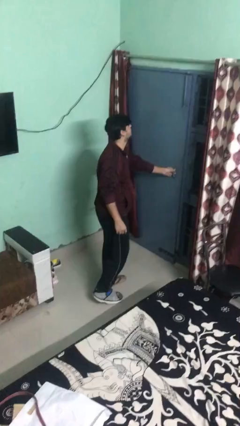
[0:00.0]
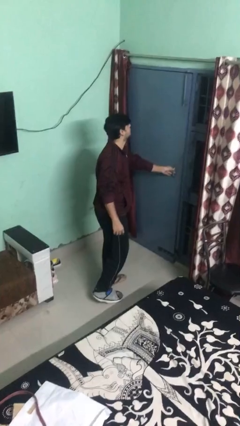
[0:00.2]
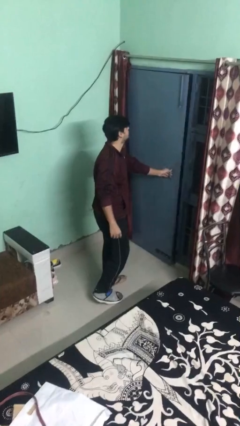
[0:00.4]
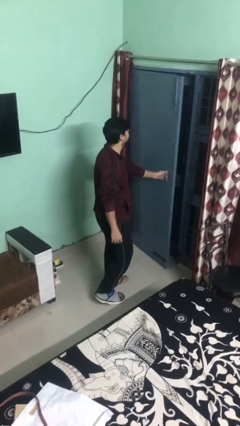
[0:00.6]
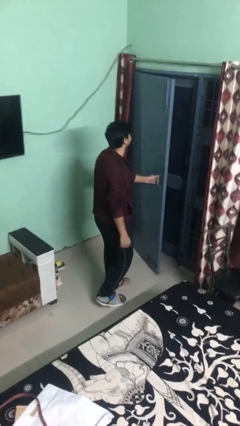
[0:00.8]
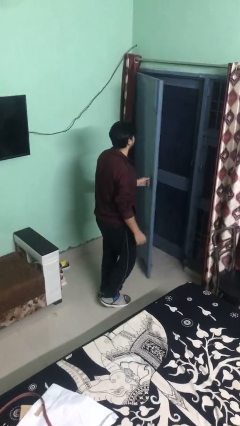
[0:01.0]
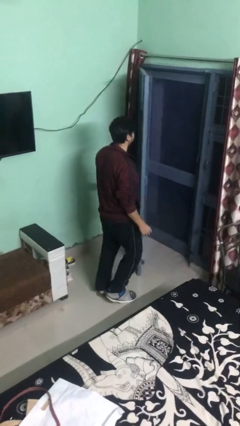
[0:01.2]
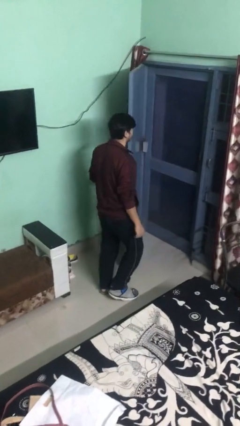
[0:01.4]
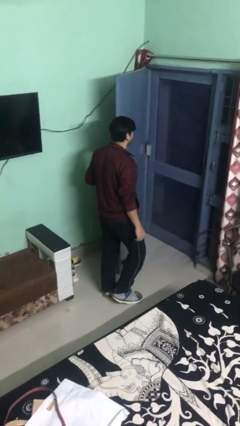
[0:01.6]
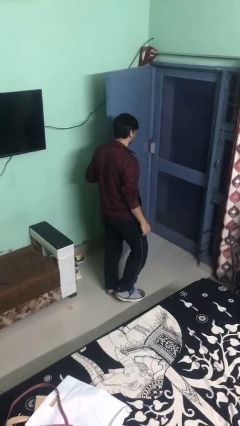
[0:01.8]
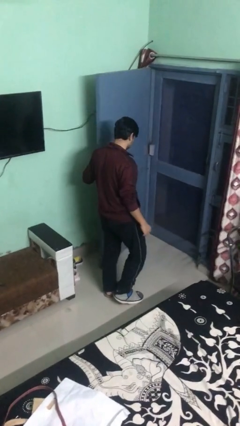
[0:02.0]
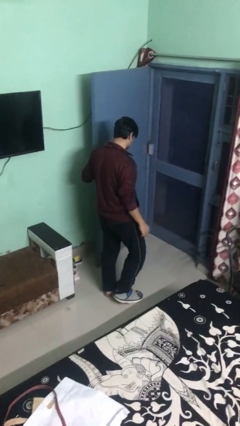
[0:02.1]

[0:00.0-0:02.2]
person opens facility door

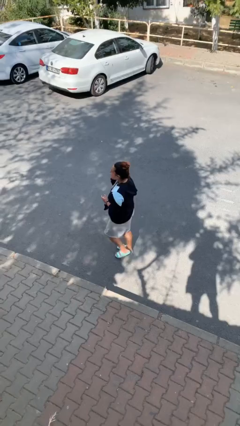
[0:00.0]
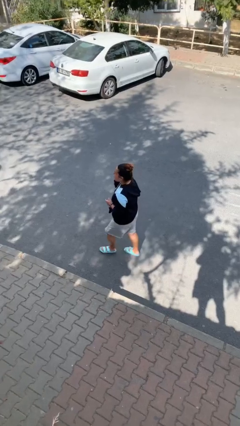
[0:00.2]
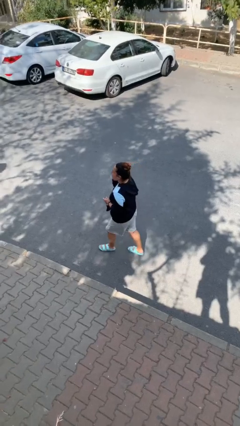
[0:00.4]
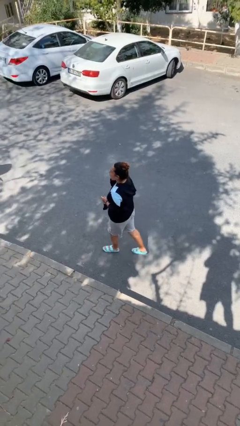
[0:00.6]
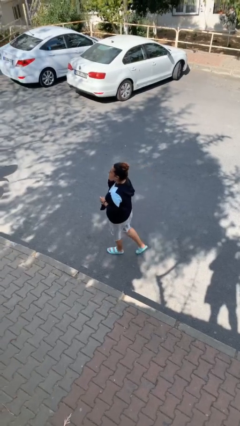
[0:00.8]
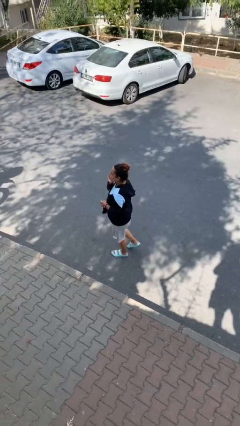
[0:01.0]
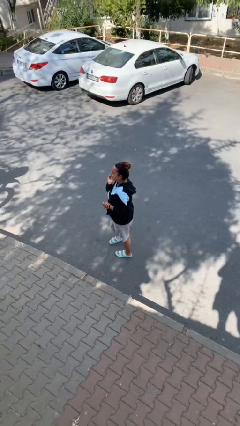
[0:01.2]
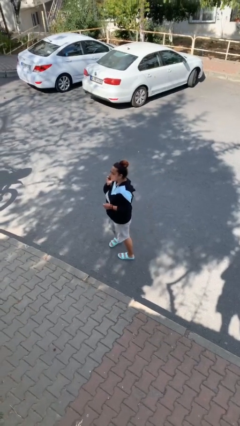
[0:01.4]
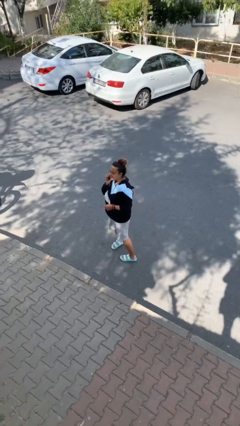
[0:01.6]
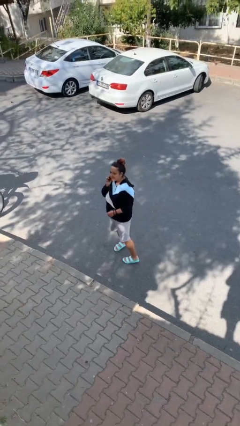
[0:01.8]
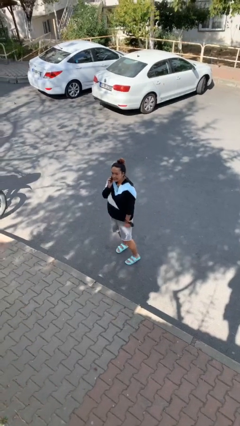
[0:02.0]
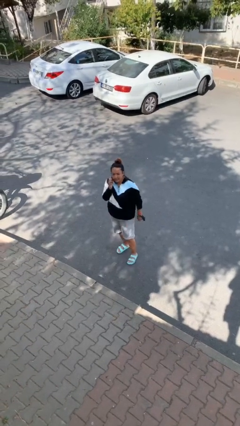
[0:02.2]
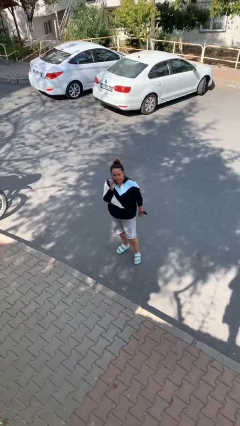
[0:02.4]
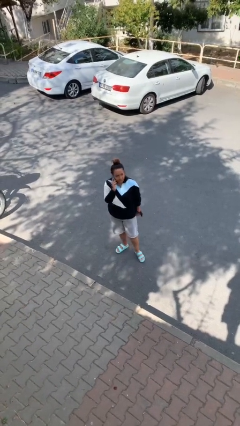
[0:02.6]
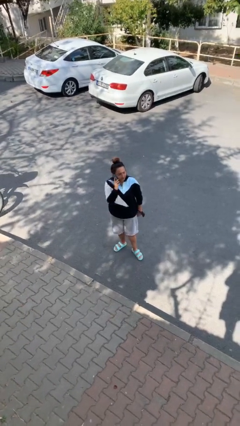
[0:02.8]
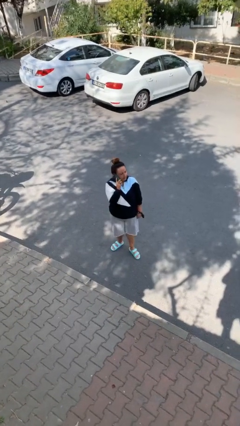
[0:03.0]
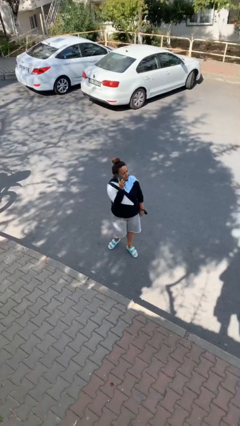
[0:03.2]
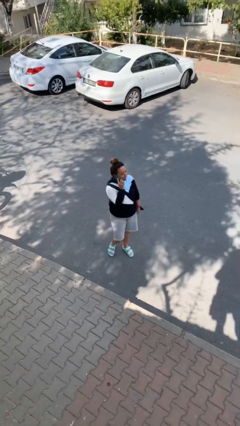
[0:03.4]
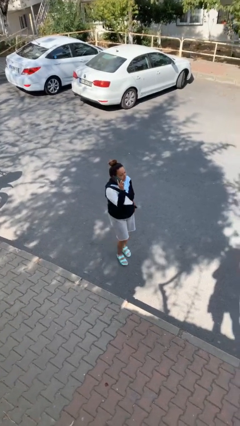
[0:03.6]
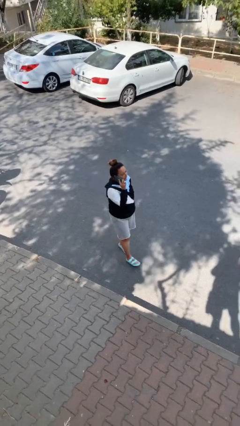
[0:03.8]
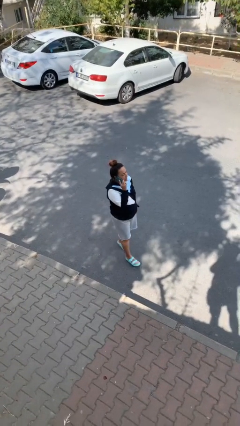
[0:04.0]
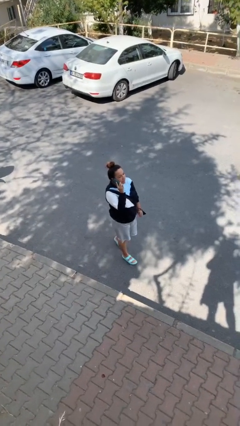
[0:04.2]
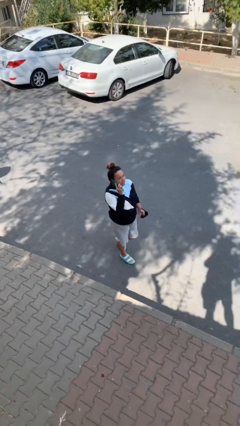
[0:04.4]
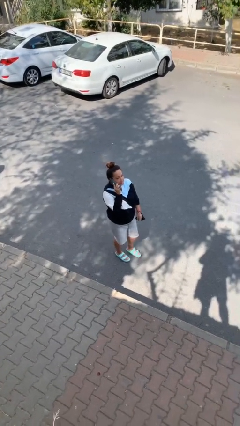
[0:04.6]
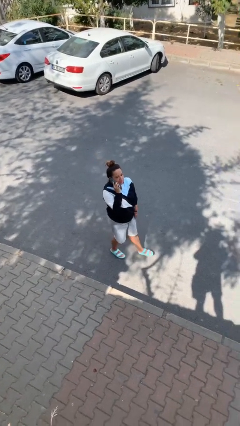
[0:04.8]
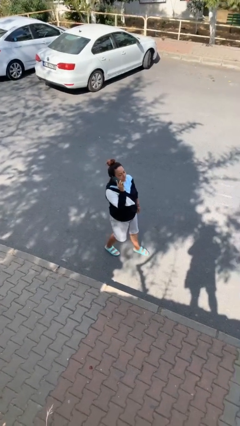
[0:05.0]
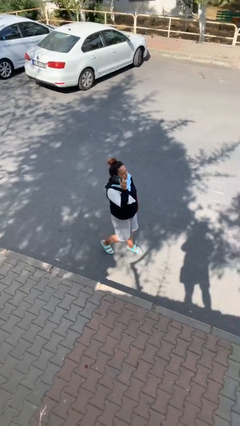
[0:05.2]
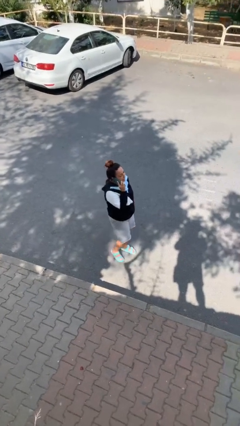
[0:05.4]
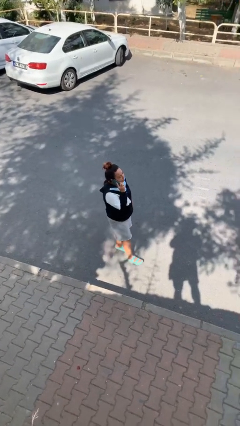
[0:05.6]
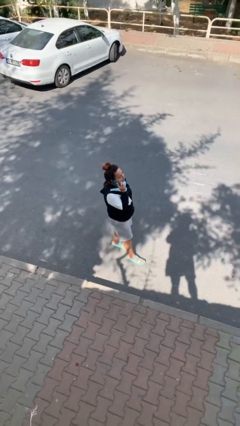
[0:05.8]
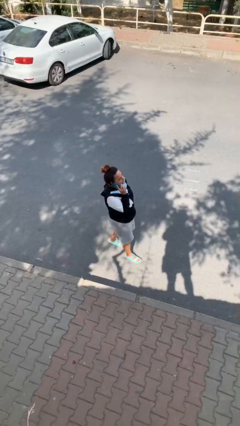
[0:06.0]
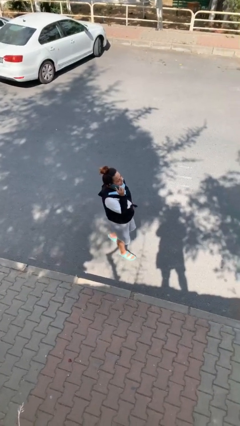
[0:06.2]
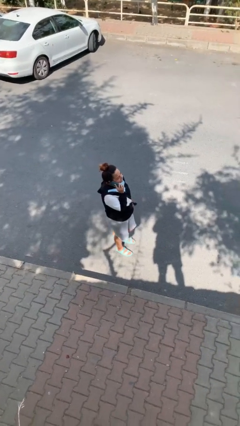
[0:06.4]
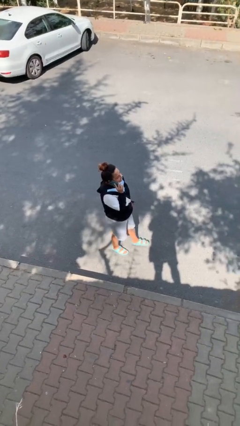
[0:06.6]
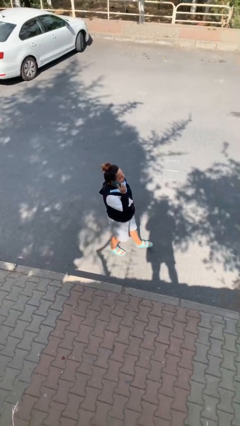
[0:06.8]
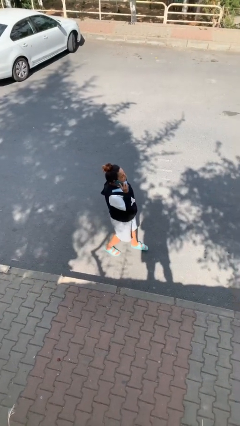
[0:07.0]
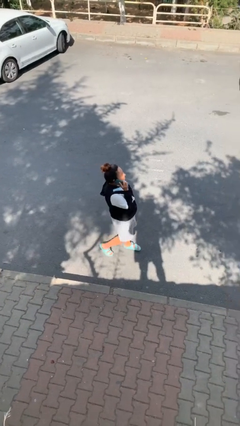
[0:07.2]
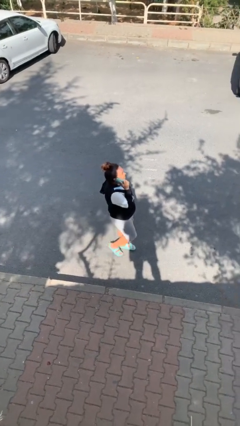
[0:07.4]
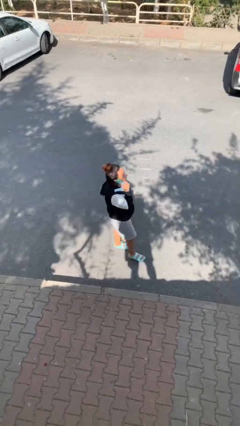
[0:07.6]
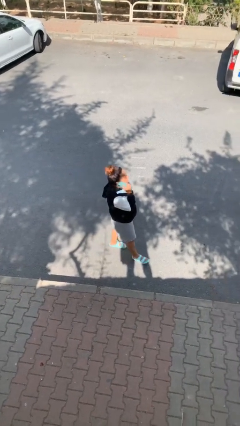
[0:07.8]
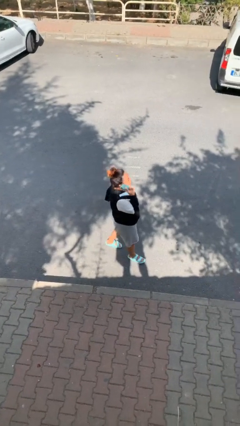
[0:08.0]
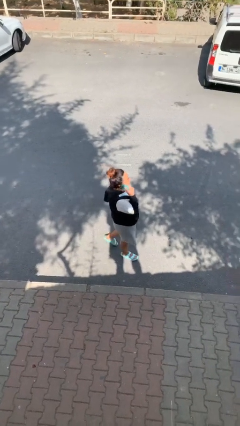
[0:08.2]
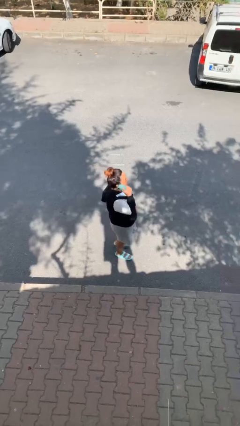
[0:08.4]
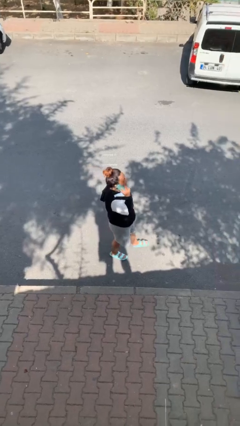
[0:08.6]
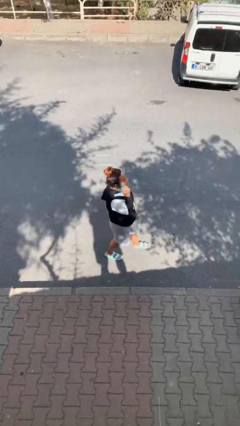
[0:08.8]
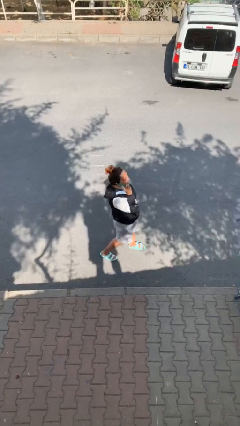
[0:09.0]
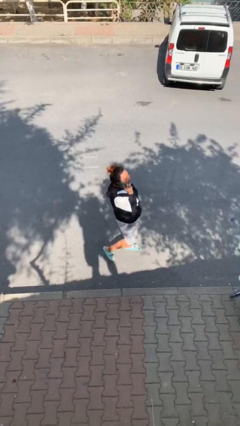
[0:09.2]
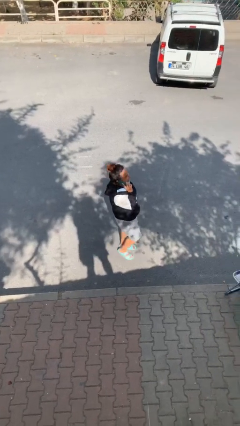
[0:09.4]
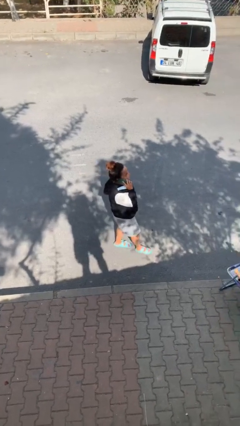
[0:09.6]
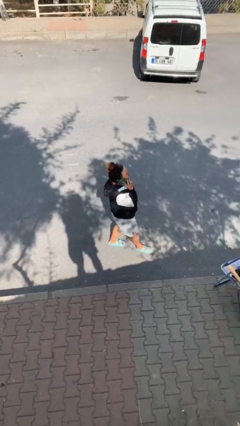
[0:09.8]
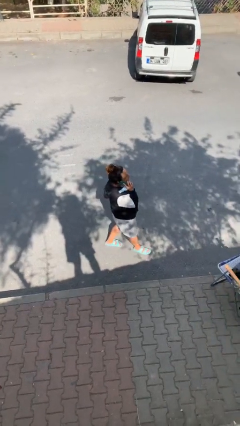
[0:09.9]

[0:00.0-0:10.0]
person talks on phone

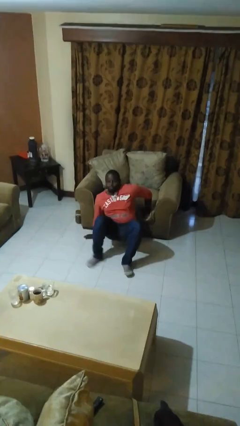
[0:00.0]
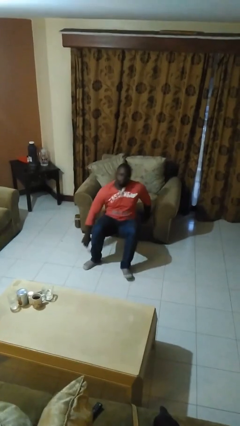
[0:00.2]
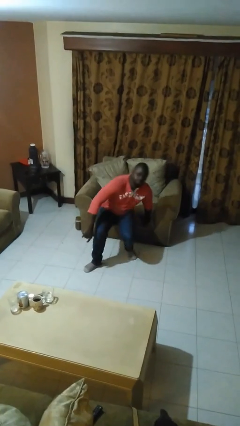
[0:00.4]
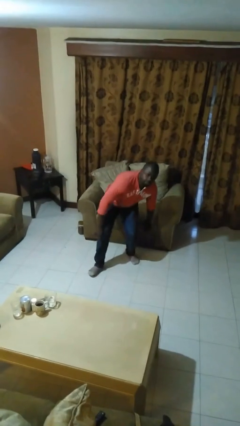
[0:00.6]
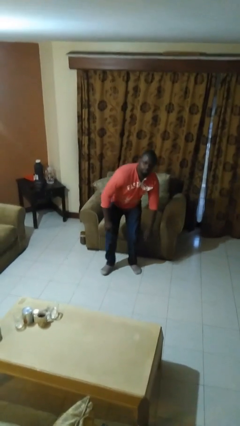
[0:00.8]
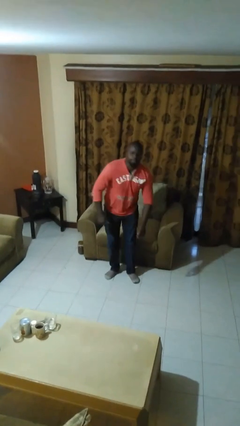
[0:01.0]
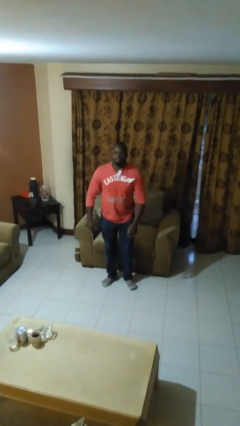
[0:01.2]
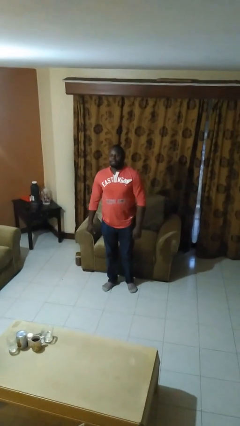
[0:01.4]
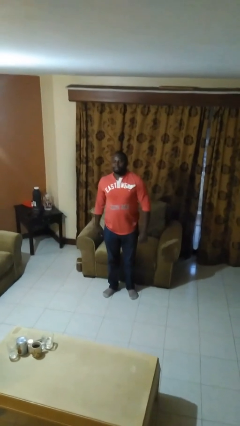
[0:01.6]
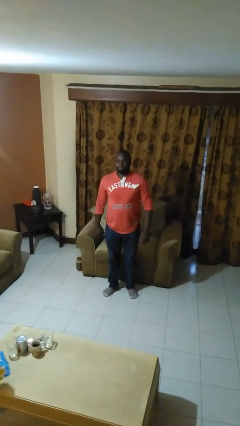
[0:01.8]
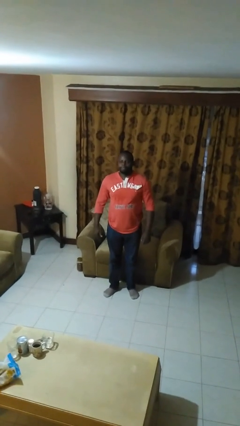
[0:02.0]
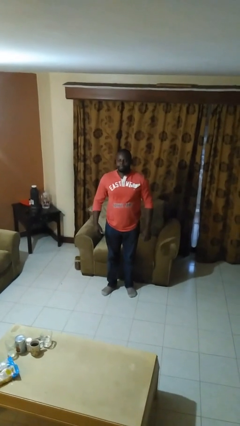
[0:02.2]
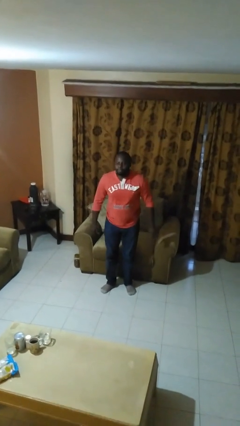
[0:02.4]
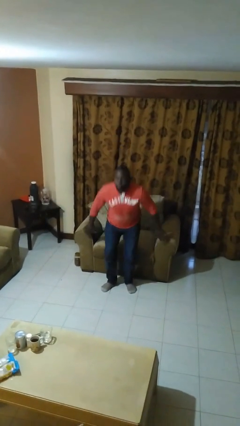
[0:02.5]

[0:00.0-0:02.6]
person stands up from floor

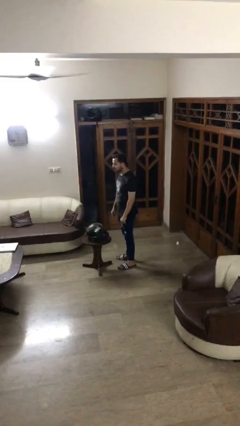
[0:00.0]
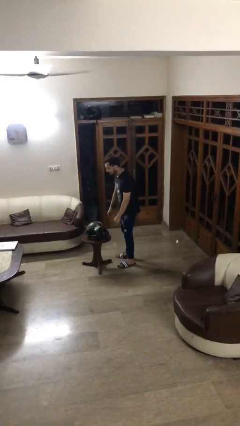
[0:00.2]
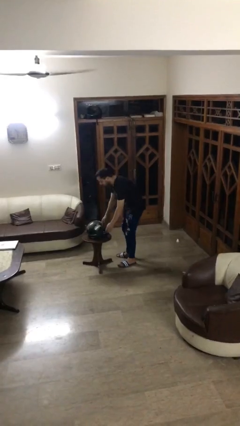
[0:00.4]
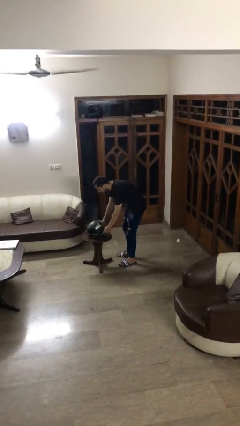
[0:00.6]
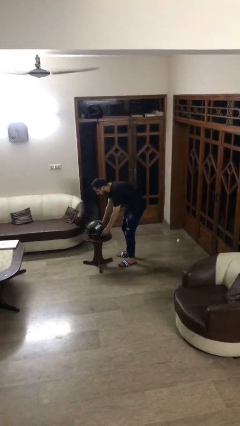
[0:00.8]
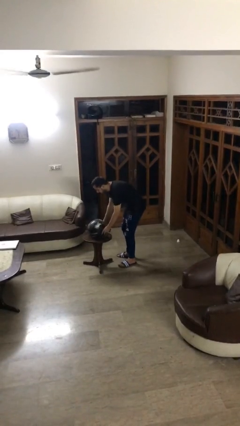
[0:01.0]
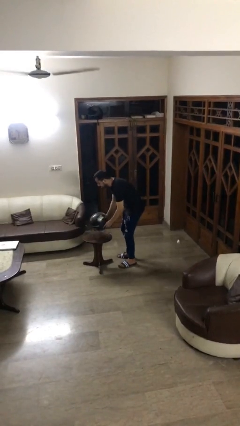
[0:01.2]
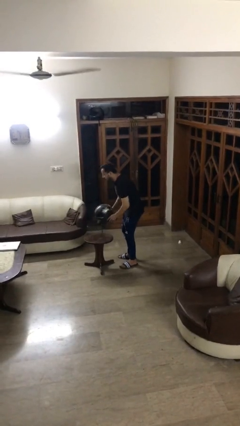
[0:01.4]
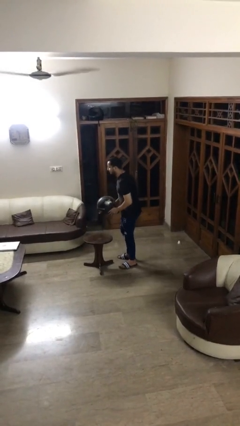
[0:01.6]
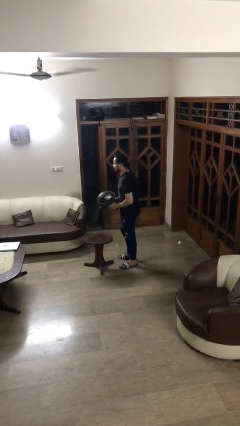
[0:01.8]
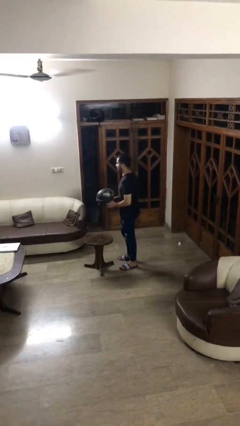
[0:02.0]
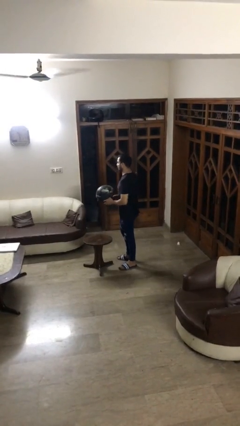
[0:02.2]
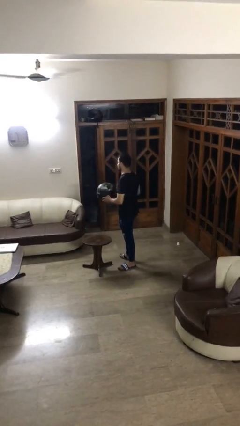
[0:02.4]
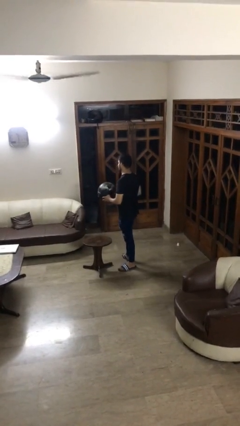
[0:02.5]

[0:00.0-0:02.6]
person picks up object from table

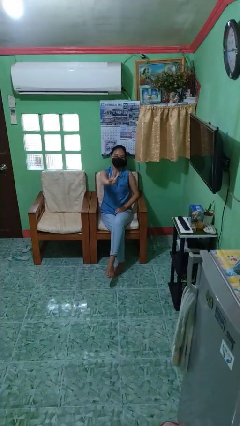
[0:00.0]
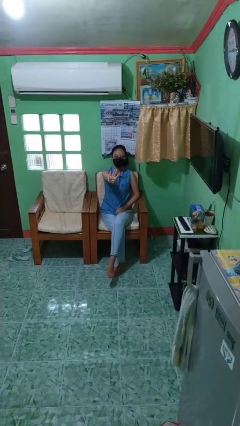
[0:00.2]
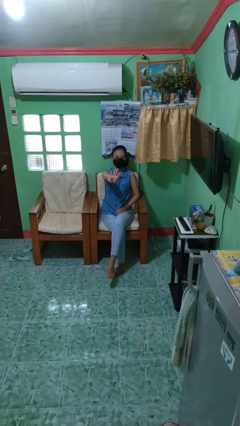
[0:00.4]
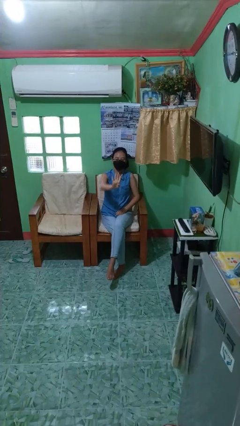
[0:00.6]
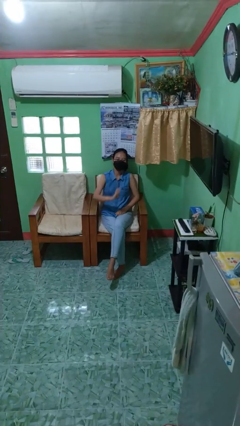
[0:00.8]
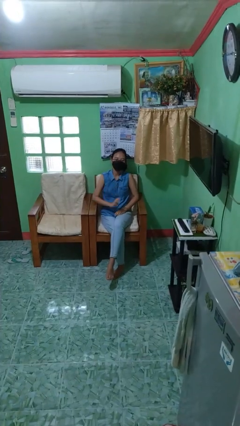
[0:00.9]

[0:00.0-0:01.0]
person gestures number four
